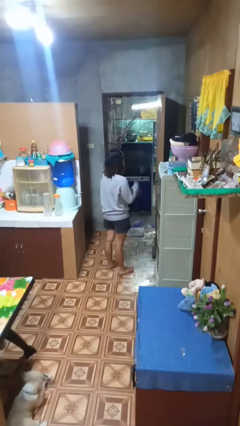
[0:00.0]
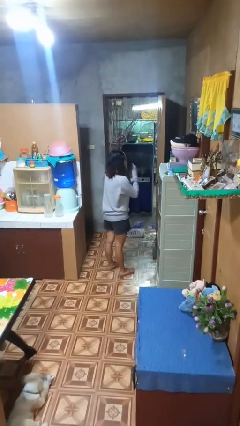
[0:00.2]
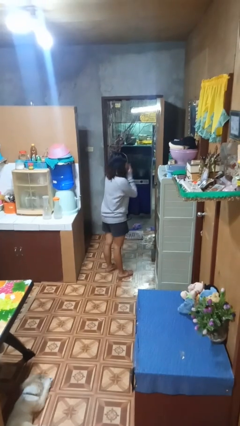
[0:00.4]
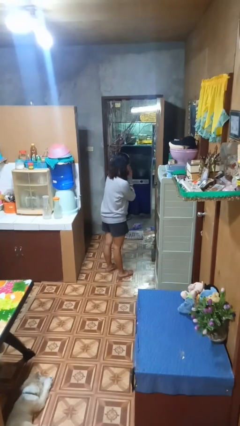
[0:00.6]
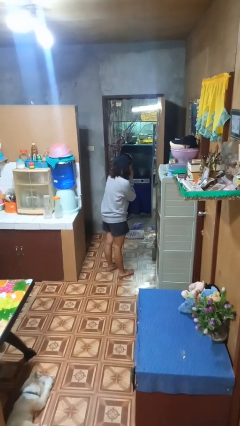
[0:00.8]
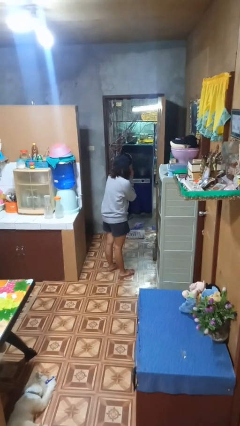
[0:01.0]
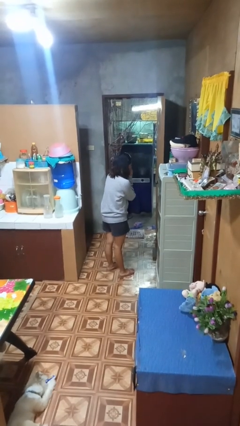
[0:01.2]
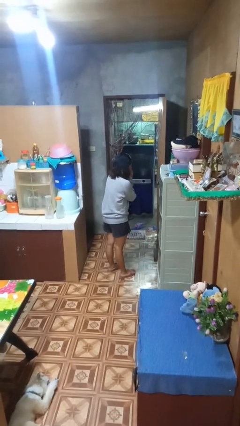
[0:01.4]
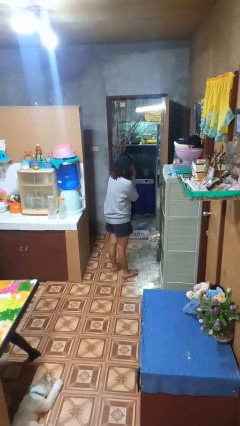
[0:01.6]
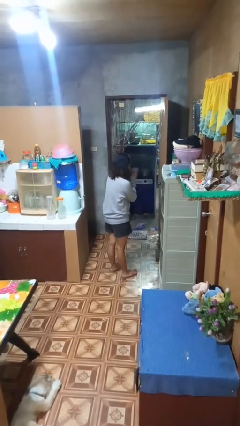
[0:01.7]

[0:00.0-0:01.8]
person blows nose

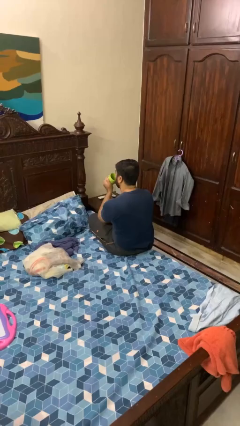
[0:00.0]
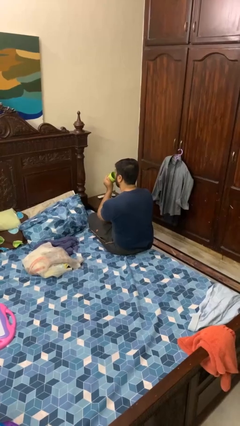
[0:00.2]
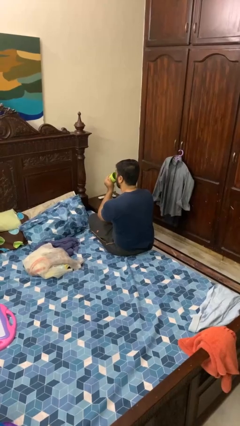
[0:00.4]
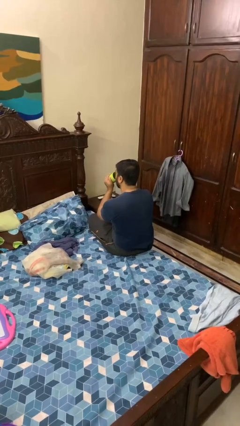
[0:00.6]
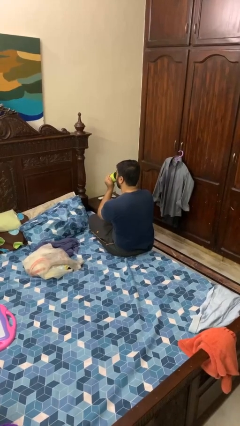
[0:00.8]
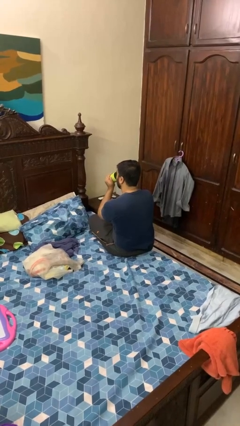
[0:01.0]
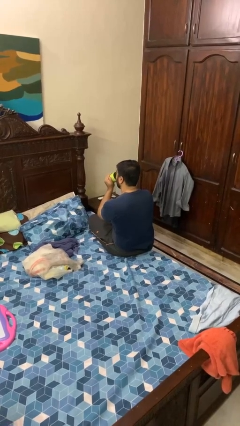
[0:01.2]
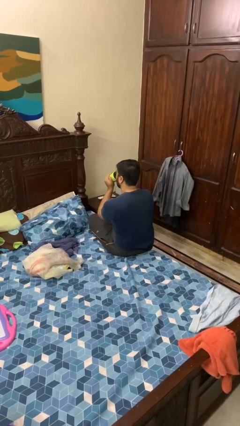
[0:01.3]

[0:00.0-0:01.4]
person drinks from mug

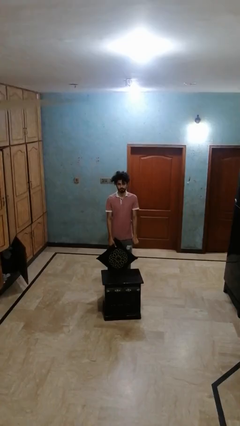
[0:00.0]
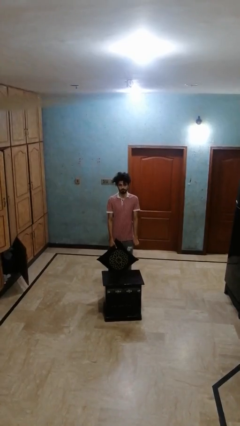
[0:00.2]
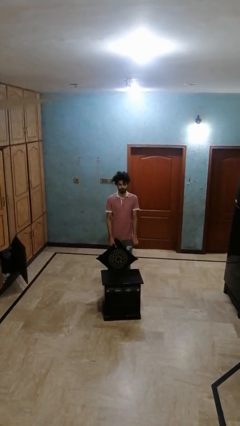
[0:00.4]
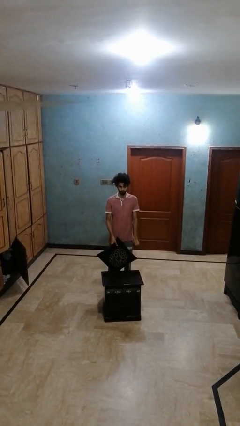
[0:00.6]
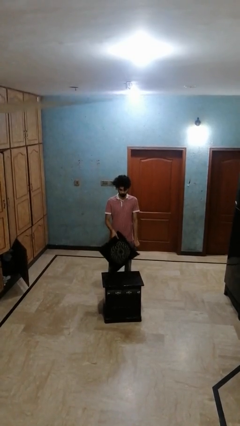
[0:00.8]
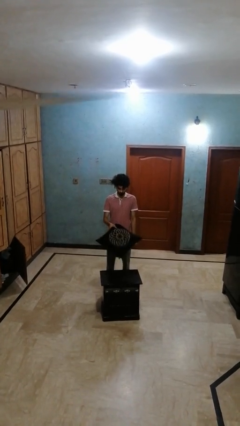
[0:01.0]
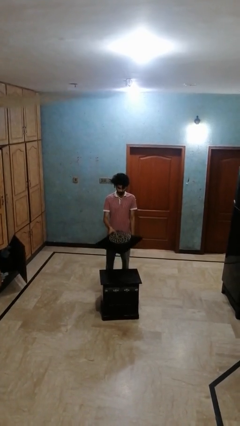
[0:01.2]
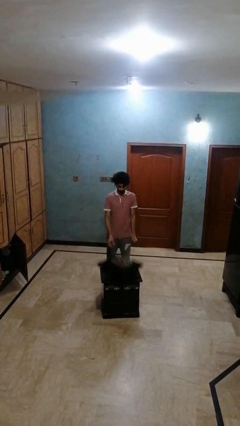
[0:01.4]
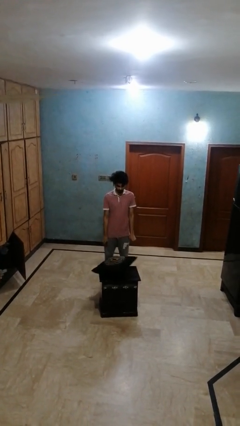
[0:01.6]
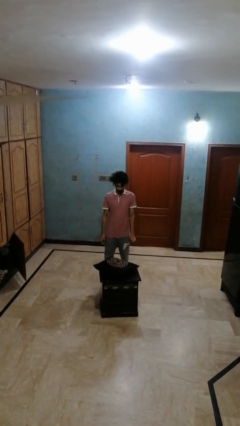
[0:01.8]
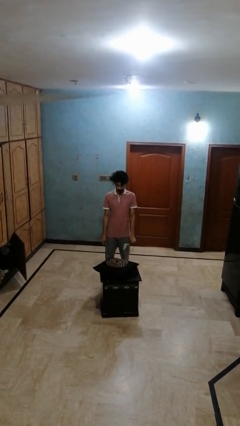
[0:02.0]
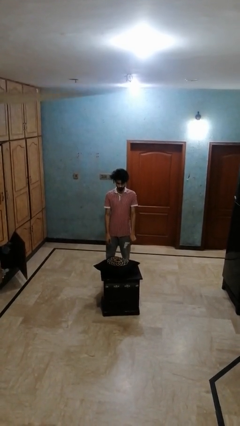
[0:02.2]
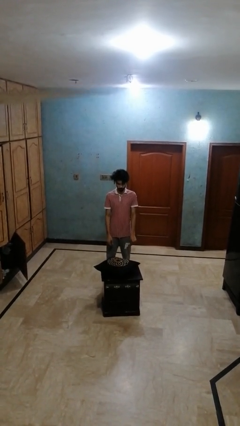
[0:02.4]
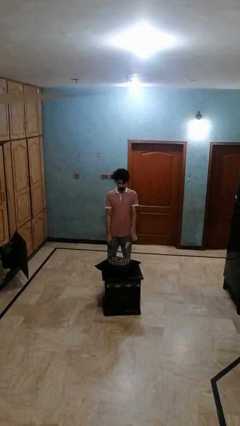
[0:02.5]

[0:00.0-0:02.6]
person throws object on table

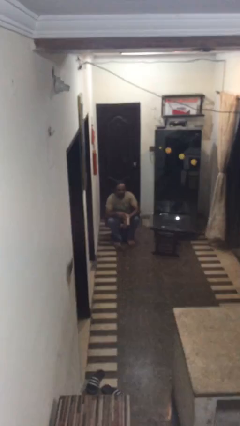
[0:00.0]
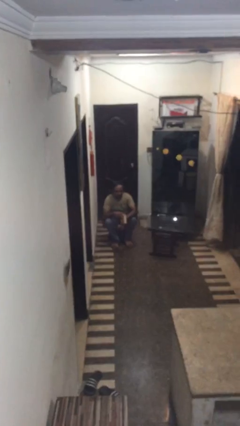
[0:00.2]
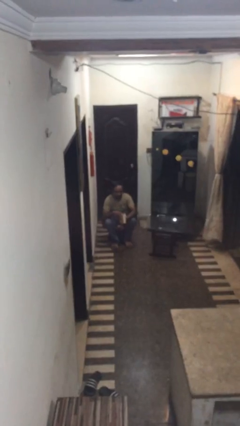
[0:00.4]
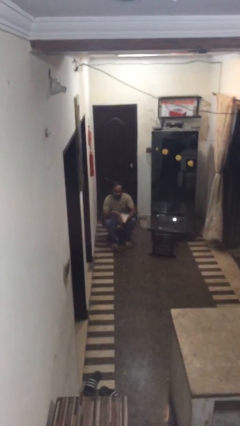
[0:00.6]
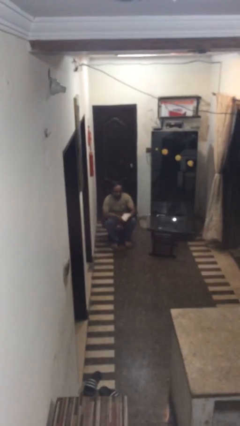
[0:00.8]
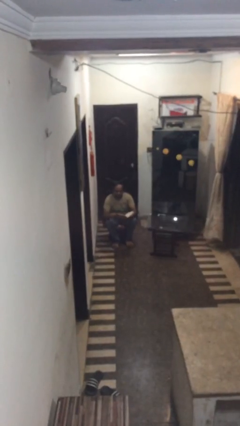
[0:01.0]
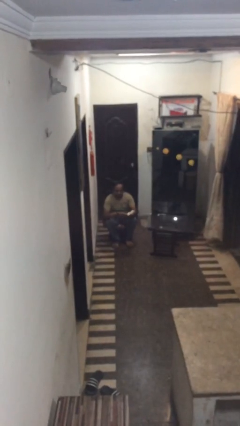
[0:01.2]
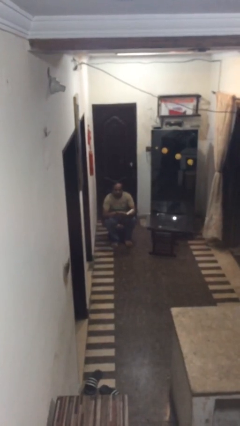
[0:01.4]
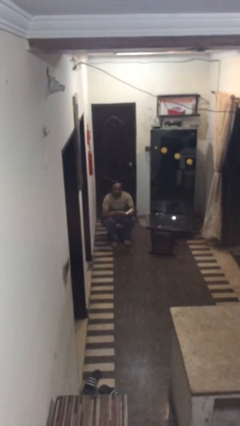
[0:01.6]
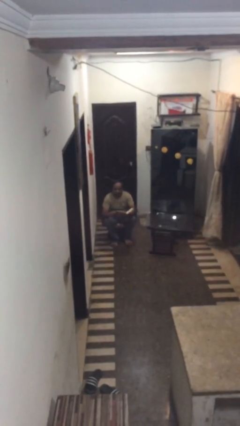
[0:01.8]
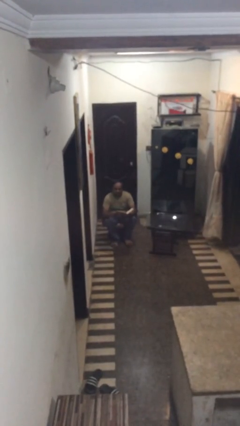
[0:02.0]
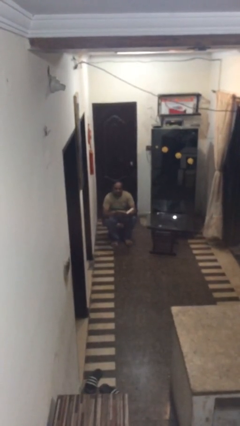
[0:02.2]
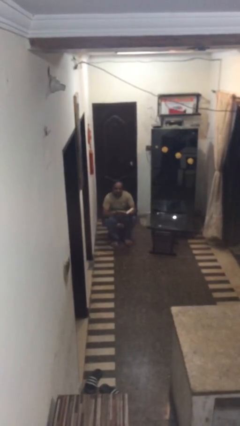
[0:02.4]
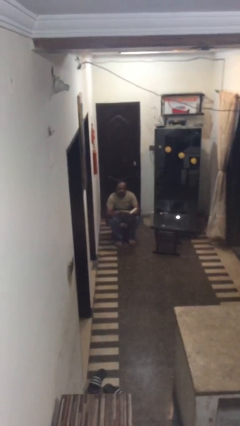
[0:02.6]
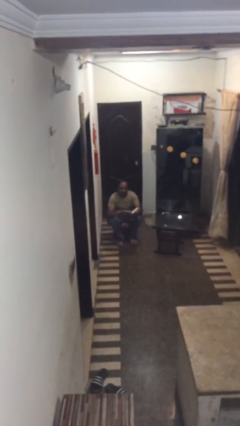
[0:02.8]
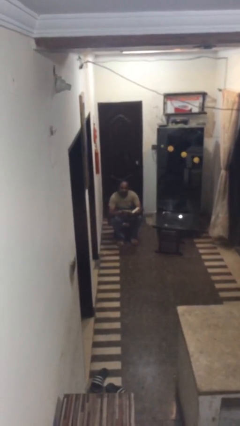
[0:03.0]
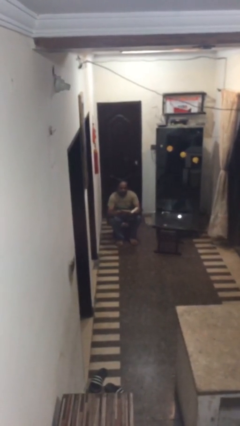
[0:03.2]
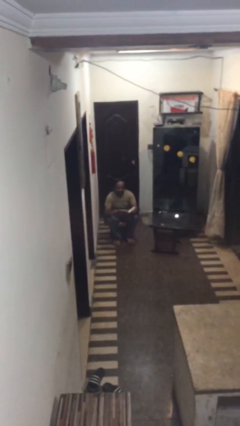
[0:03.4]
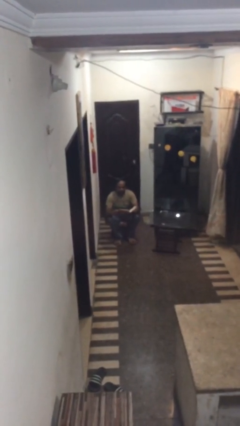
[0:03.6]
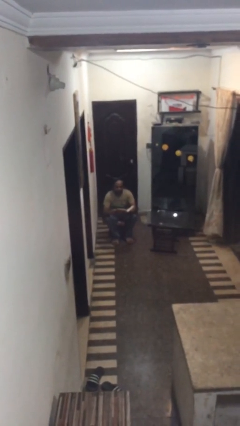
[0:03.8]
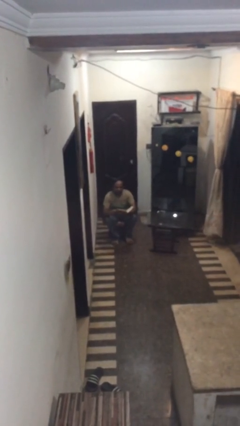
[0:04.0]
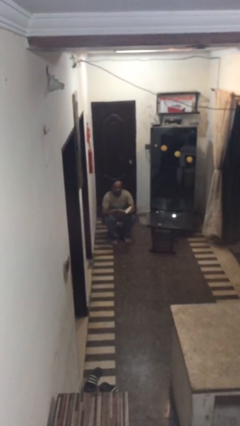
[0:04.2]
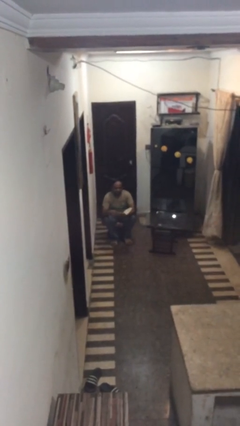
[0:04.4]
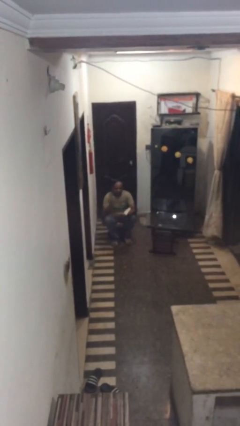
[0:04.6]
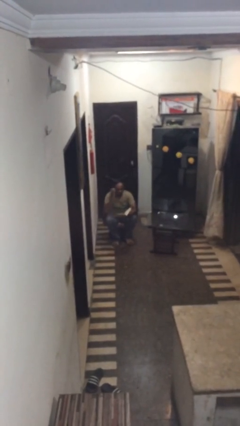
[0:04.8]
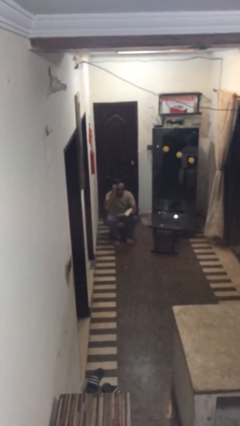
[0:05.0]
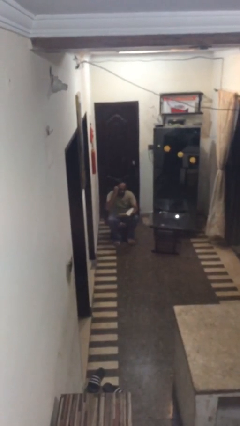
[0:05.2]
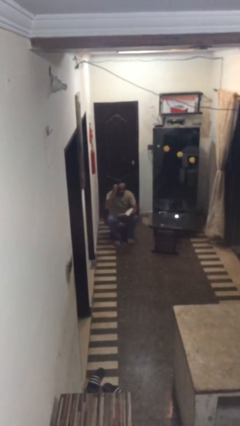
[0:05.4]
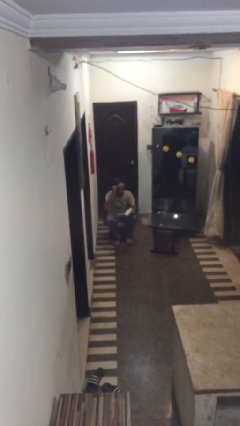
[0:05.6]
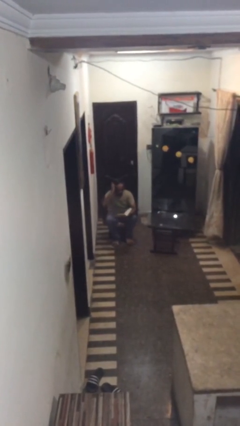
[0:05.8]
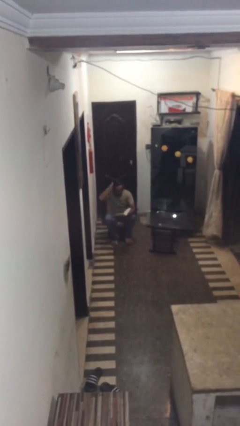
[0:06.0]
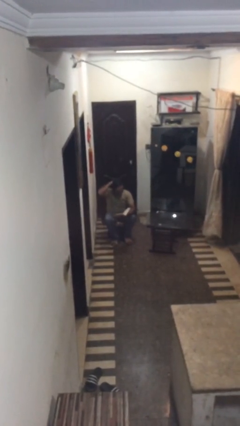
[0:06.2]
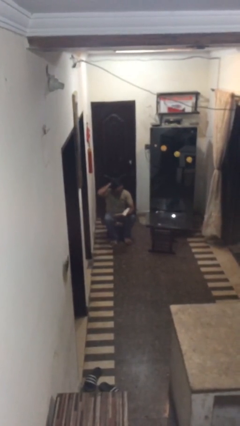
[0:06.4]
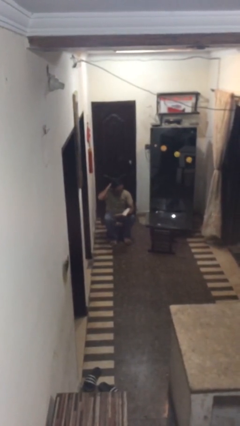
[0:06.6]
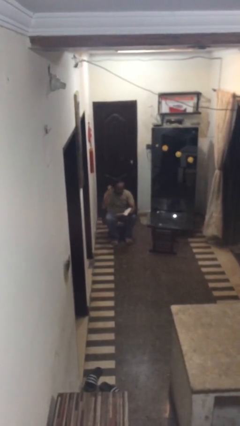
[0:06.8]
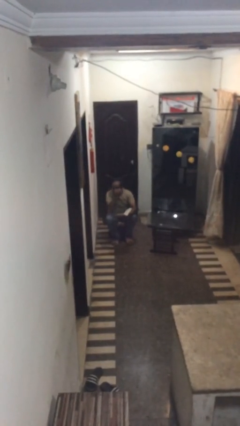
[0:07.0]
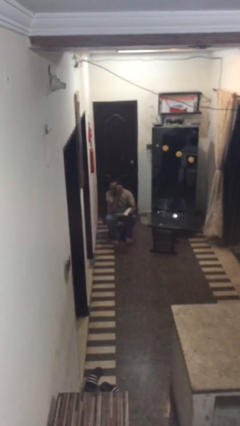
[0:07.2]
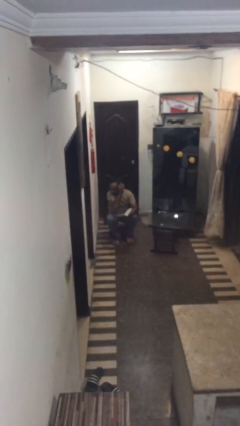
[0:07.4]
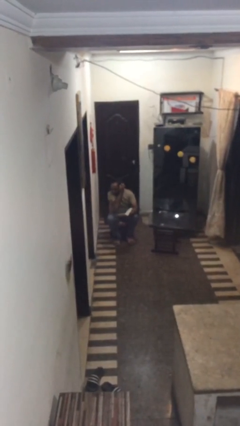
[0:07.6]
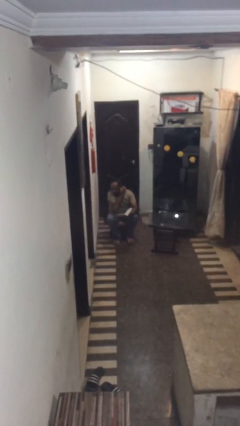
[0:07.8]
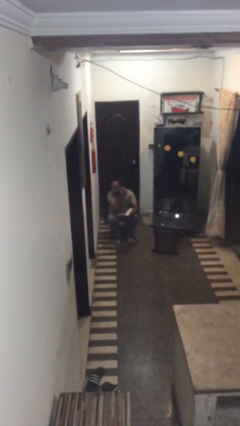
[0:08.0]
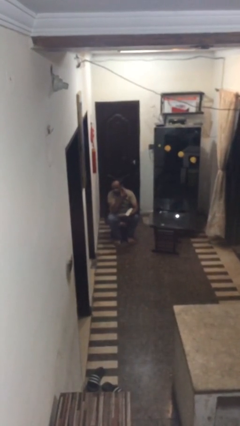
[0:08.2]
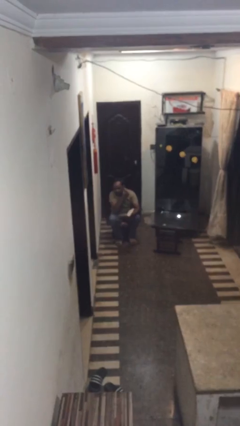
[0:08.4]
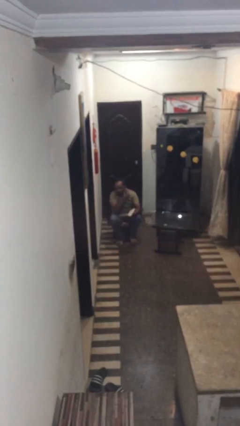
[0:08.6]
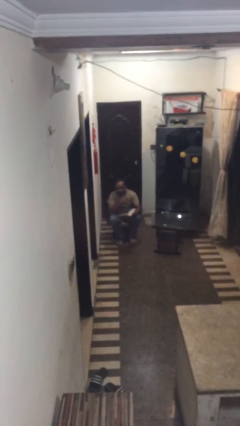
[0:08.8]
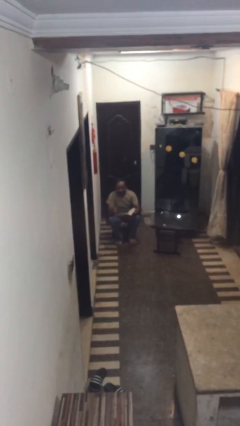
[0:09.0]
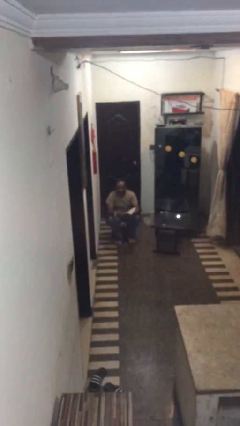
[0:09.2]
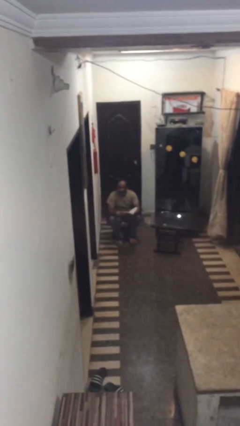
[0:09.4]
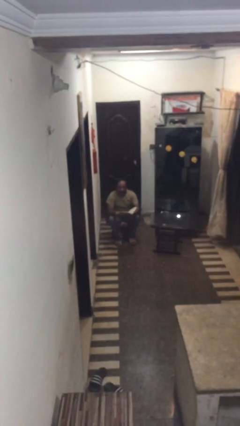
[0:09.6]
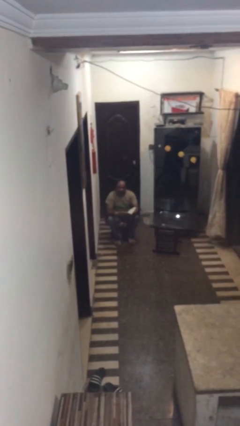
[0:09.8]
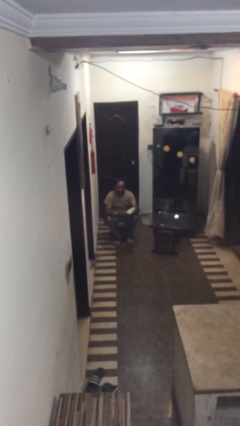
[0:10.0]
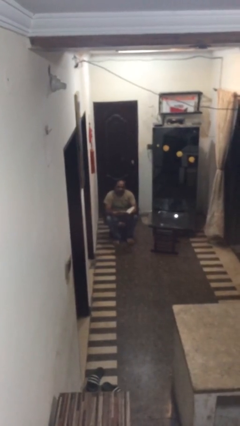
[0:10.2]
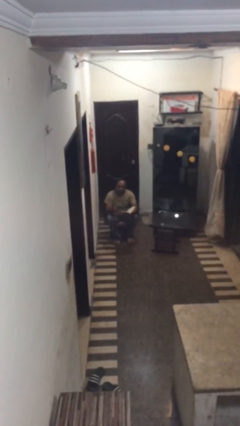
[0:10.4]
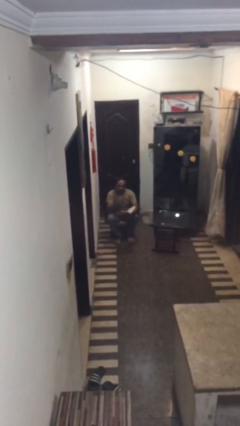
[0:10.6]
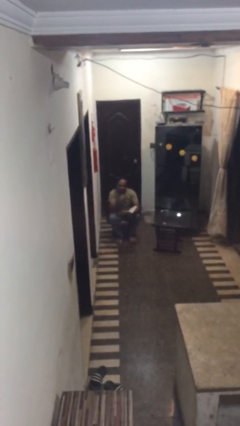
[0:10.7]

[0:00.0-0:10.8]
person reads document

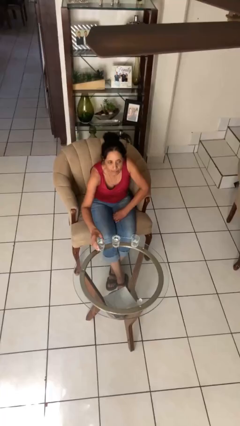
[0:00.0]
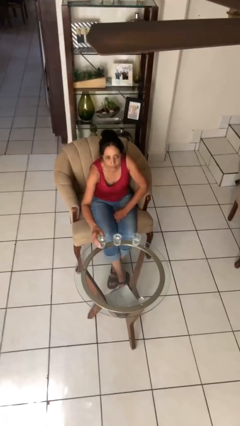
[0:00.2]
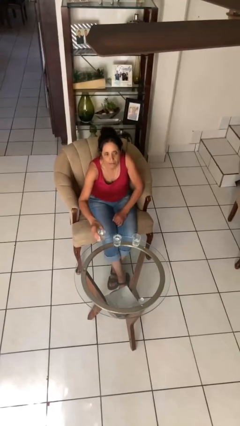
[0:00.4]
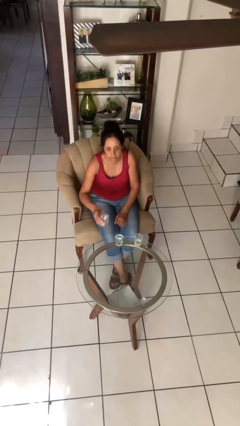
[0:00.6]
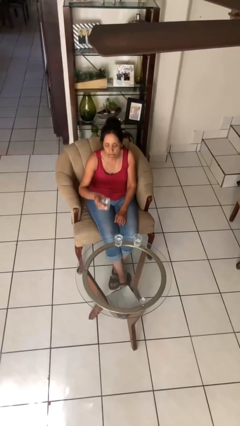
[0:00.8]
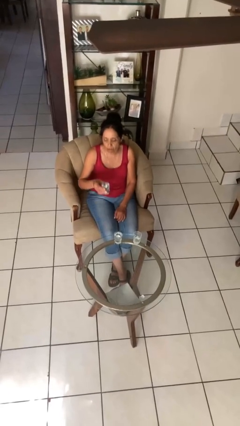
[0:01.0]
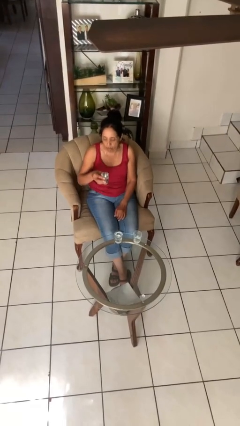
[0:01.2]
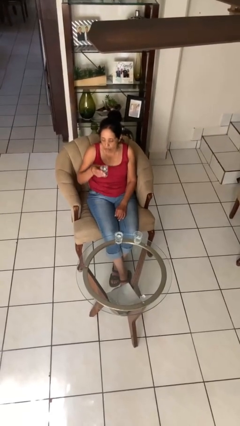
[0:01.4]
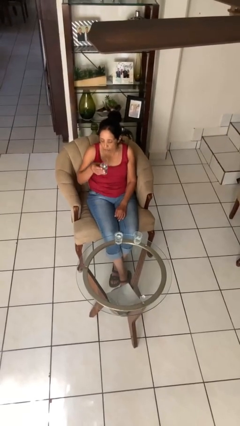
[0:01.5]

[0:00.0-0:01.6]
person picks up object from table
